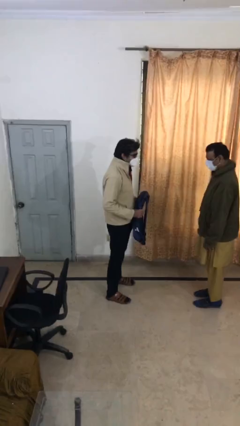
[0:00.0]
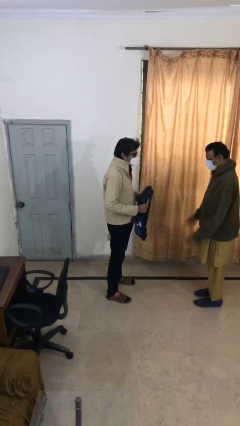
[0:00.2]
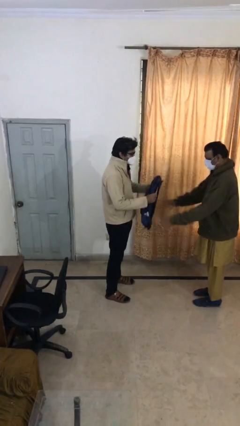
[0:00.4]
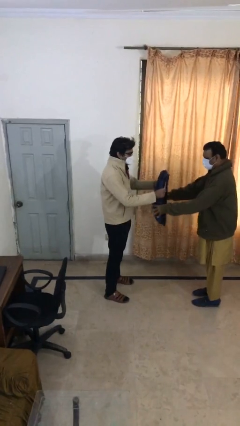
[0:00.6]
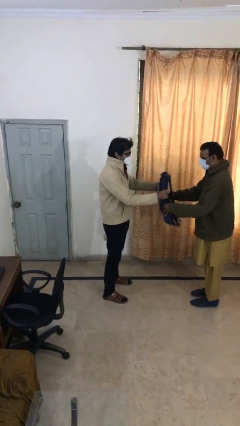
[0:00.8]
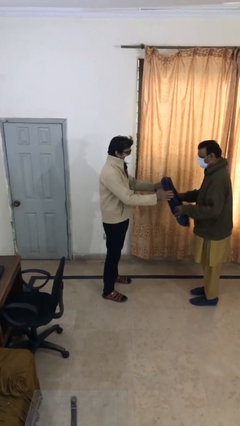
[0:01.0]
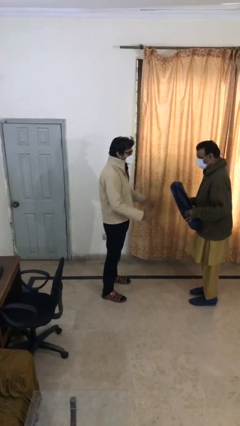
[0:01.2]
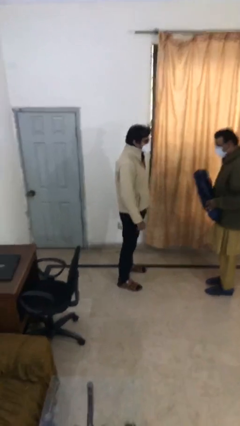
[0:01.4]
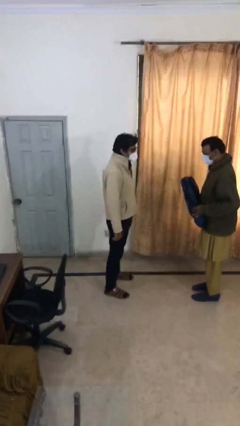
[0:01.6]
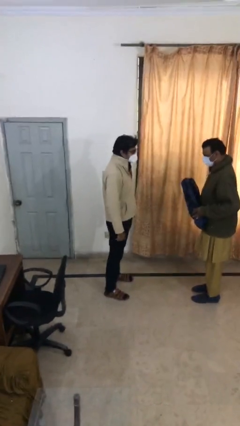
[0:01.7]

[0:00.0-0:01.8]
person transfers object to person

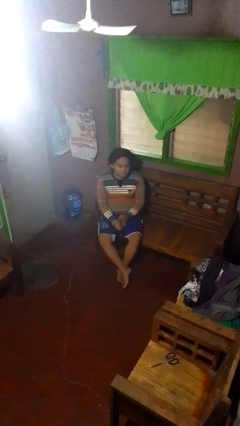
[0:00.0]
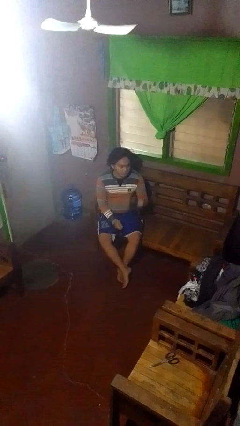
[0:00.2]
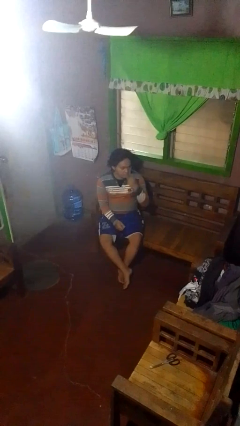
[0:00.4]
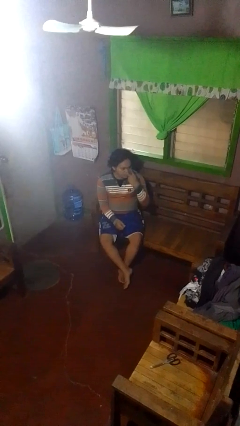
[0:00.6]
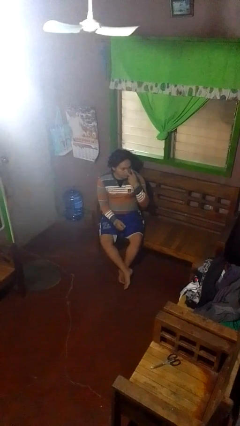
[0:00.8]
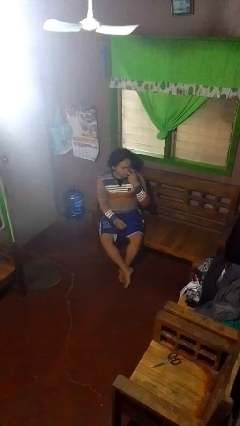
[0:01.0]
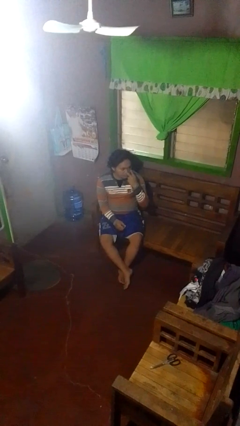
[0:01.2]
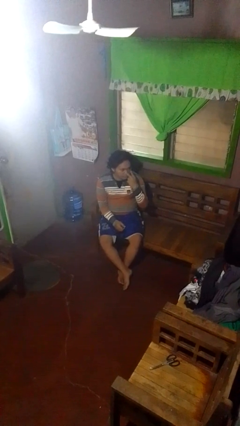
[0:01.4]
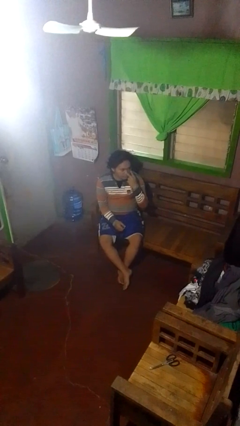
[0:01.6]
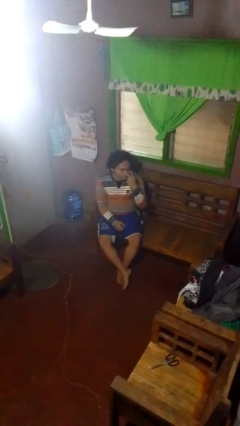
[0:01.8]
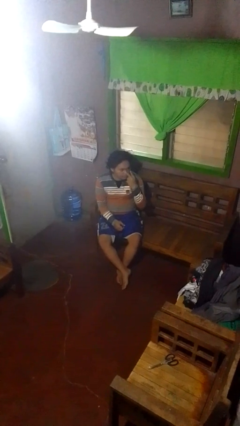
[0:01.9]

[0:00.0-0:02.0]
person gestures watch closely

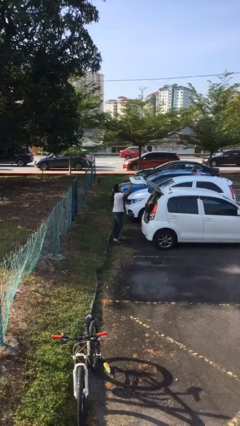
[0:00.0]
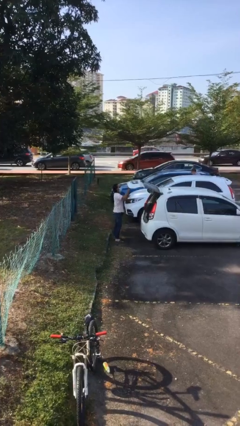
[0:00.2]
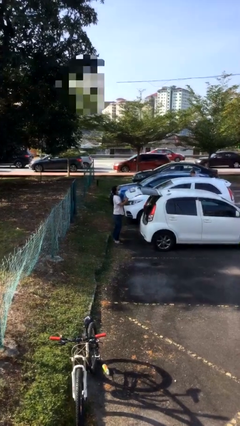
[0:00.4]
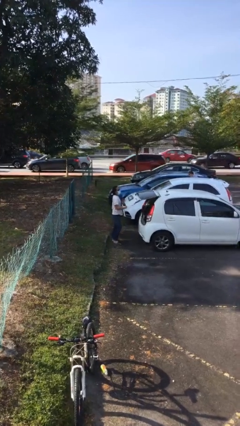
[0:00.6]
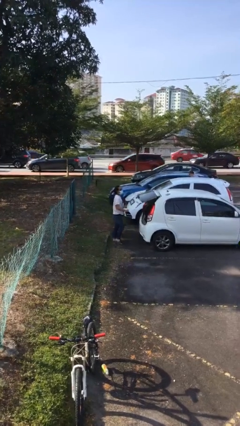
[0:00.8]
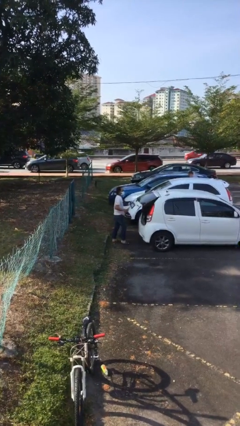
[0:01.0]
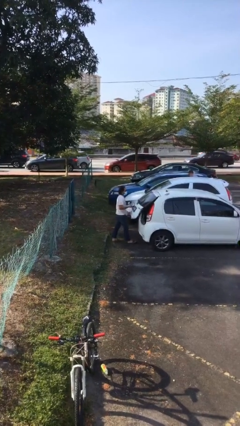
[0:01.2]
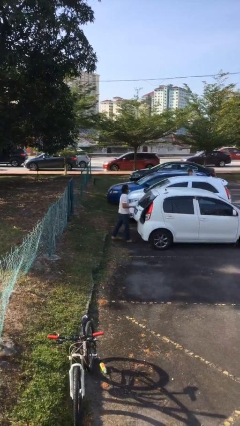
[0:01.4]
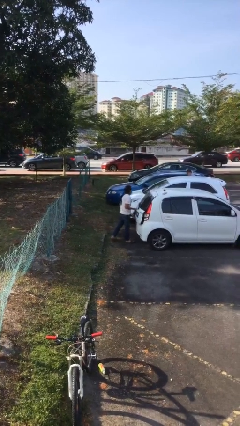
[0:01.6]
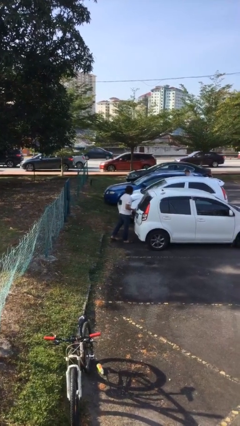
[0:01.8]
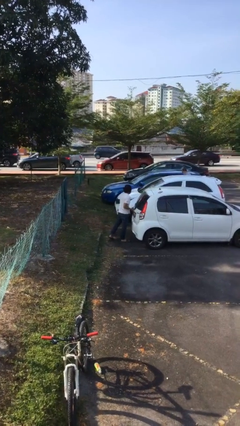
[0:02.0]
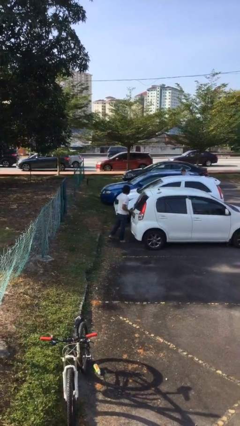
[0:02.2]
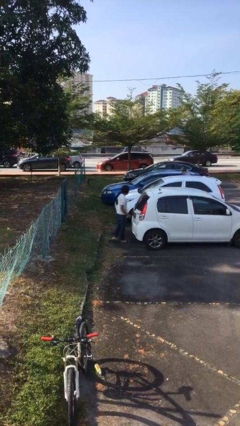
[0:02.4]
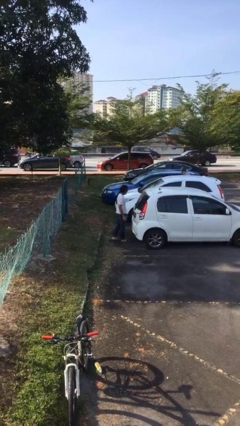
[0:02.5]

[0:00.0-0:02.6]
person closes car trunk

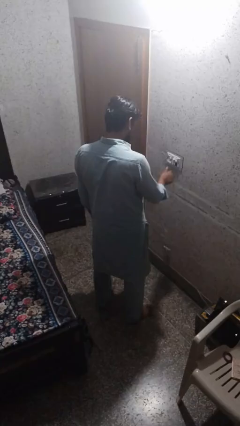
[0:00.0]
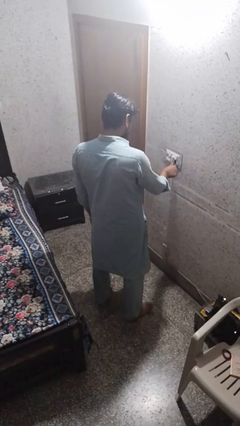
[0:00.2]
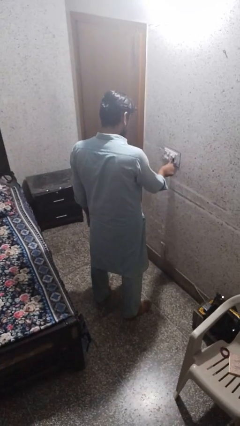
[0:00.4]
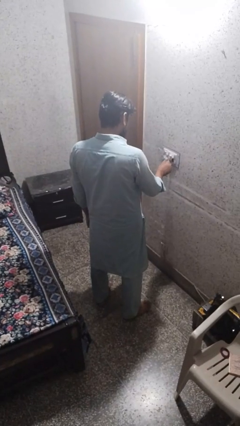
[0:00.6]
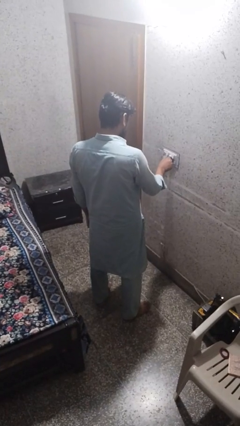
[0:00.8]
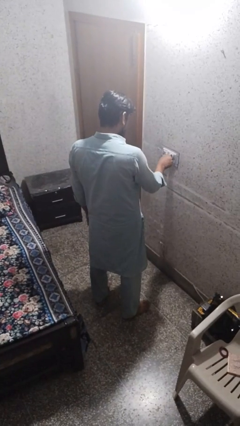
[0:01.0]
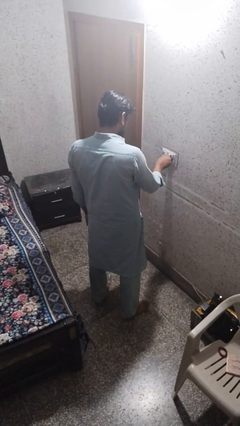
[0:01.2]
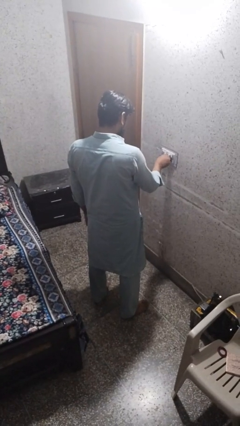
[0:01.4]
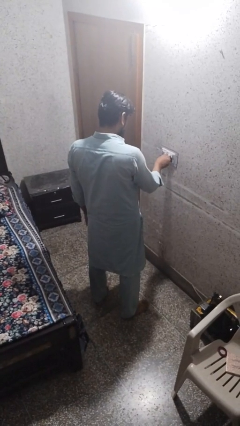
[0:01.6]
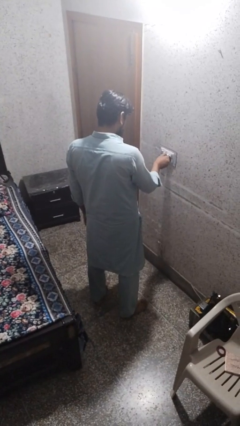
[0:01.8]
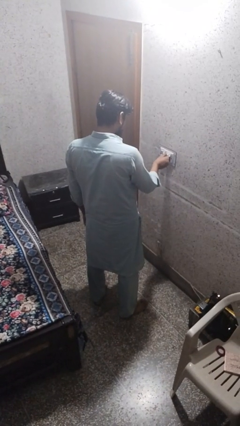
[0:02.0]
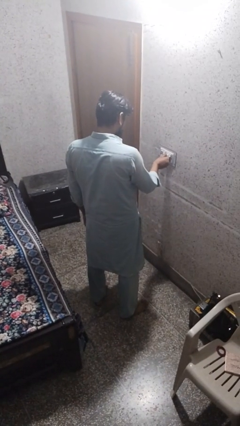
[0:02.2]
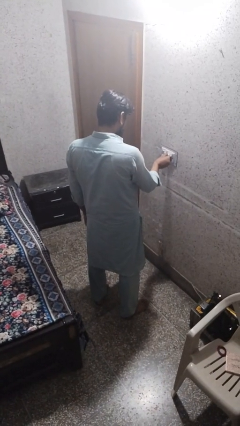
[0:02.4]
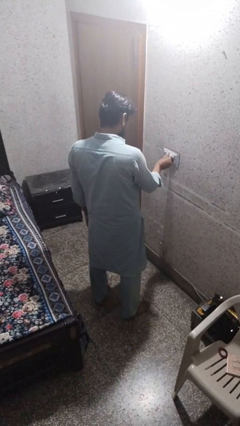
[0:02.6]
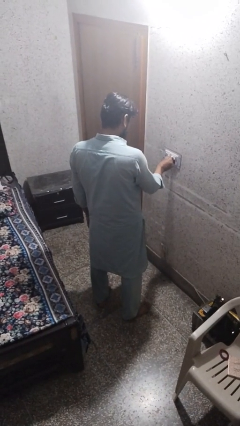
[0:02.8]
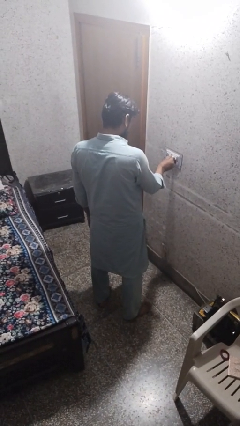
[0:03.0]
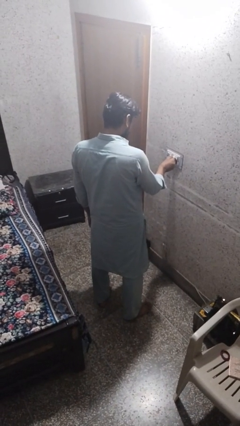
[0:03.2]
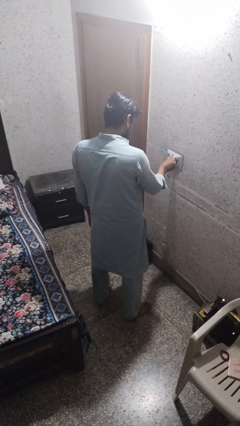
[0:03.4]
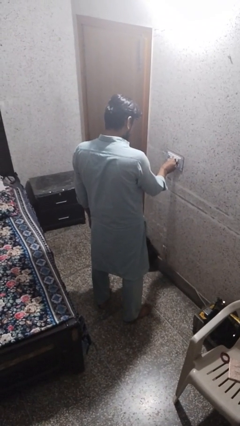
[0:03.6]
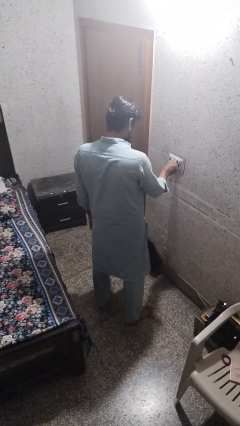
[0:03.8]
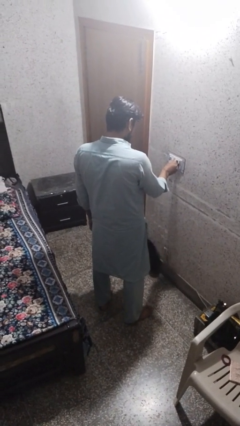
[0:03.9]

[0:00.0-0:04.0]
person turns on fan

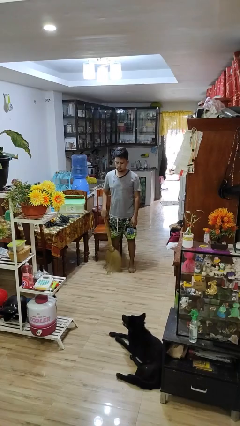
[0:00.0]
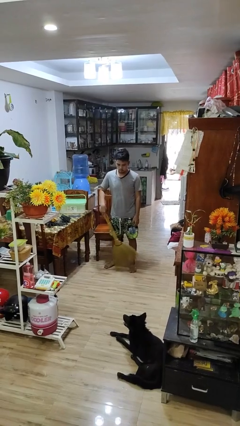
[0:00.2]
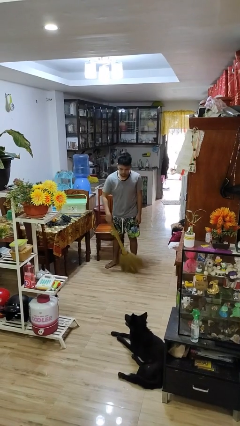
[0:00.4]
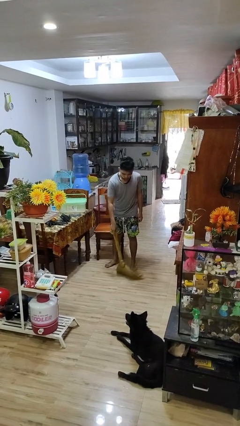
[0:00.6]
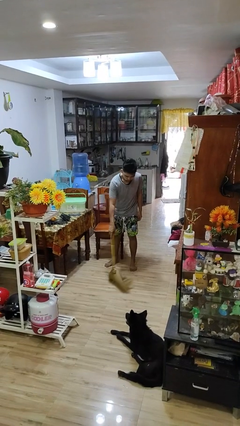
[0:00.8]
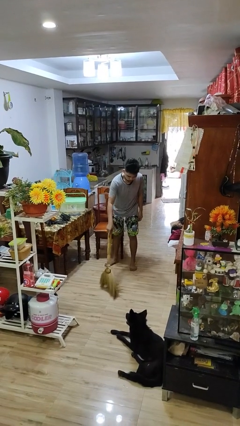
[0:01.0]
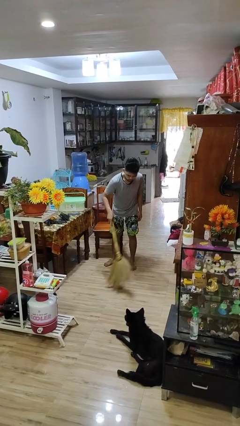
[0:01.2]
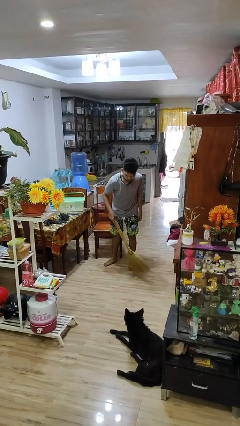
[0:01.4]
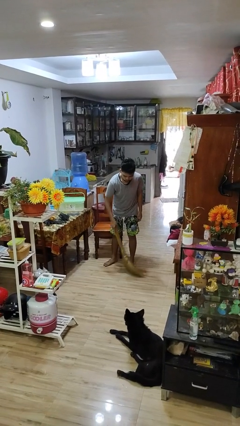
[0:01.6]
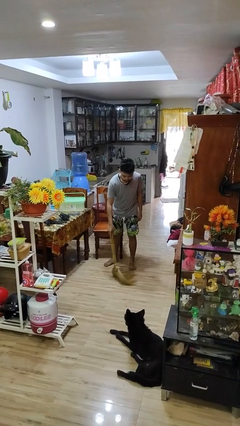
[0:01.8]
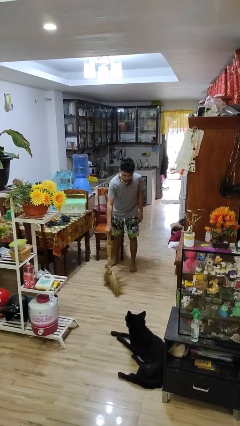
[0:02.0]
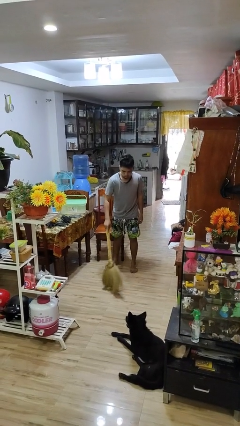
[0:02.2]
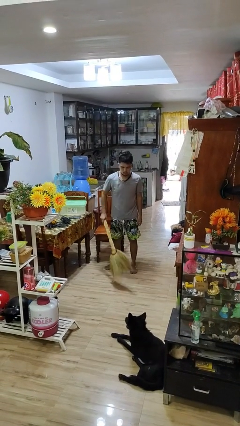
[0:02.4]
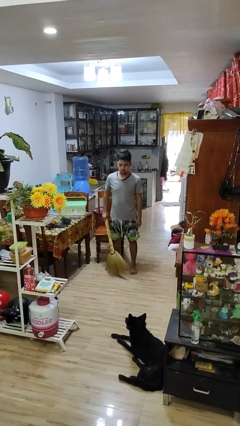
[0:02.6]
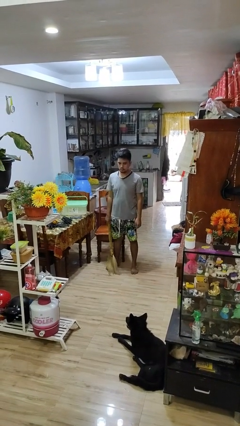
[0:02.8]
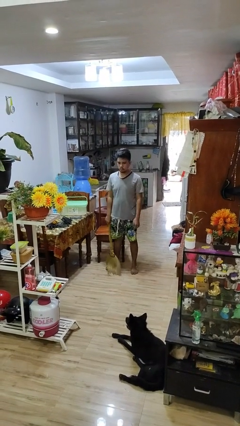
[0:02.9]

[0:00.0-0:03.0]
person sweeps floor

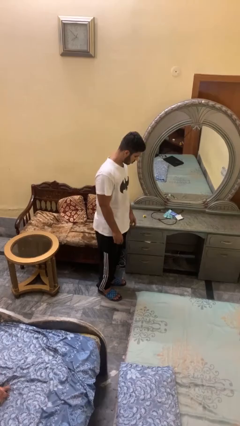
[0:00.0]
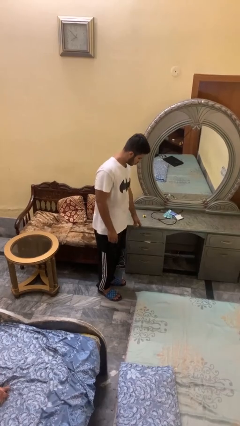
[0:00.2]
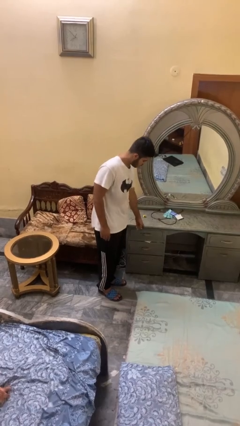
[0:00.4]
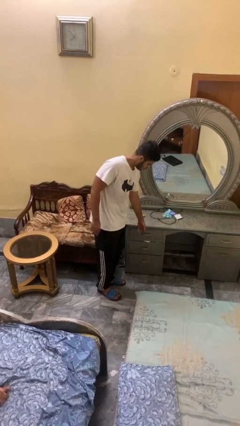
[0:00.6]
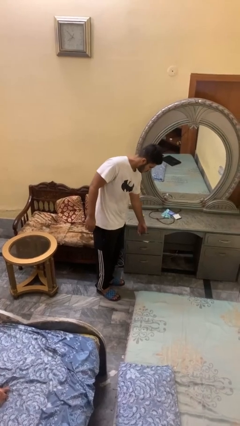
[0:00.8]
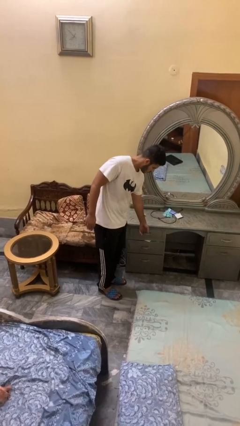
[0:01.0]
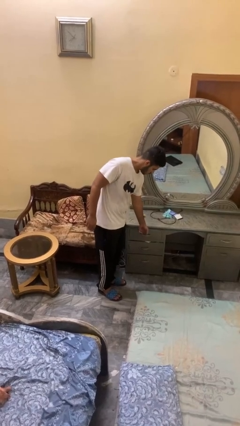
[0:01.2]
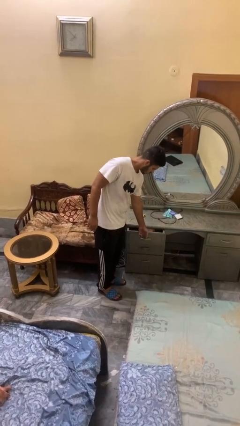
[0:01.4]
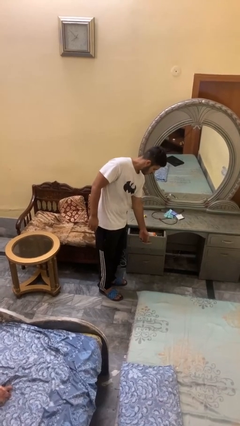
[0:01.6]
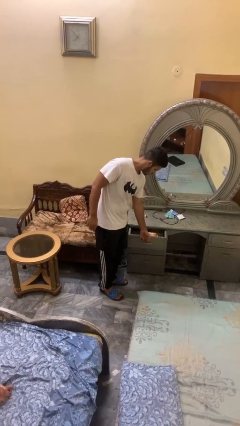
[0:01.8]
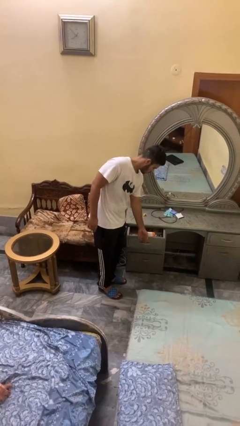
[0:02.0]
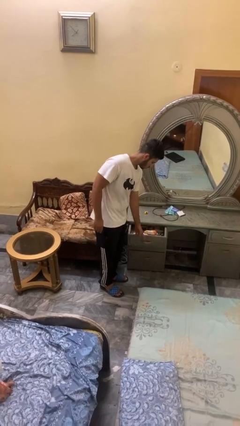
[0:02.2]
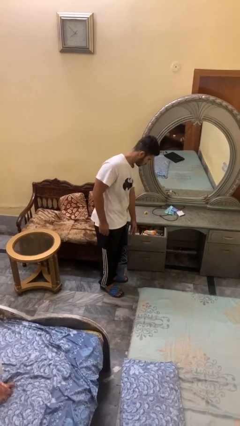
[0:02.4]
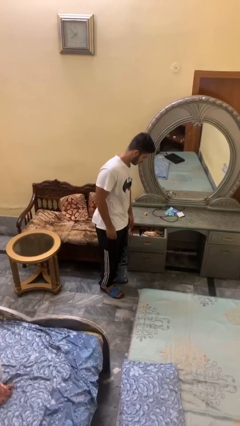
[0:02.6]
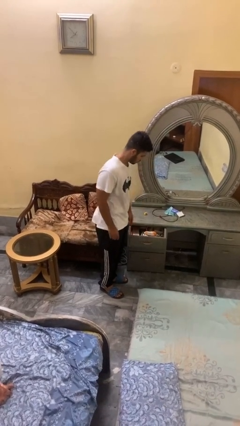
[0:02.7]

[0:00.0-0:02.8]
person opens dresser drawer

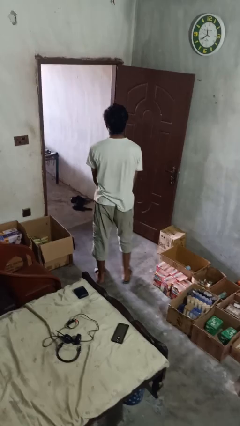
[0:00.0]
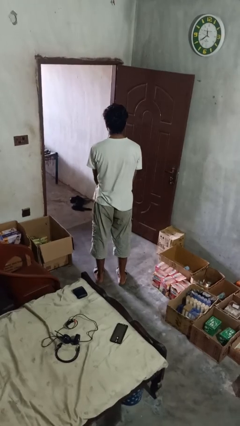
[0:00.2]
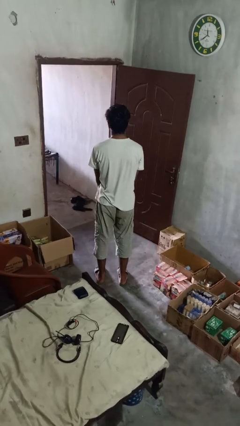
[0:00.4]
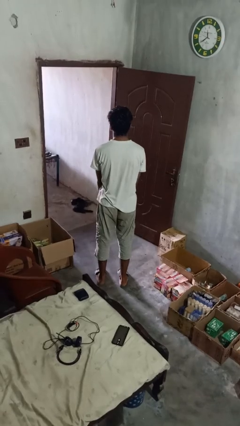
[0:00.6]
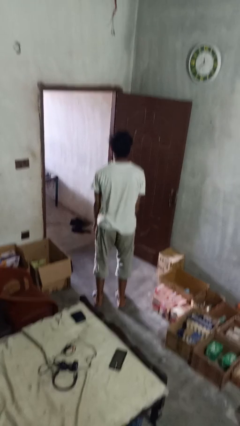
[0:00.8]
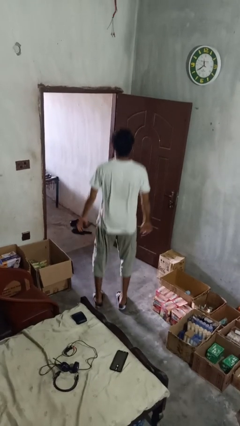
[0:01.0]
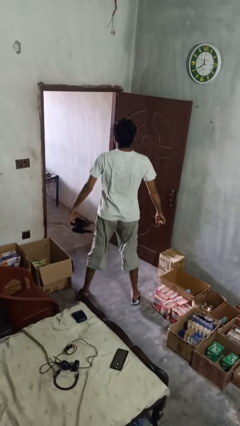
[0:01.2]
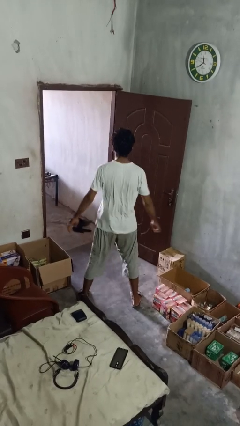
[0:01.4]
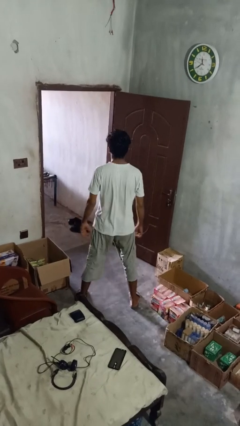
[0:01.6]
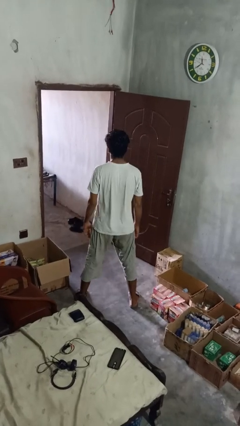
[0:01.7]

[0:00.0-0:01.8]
person stretches back
